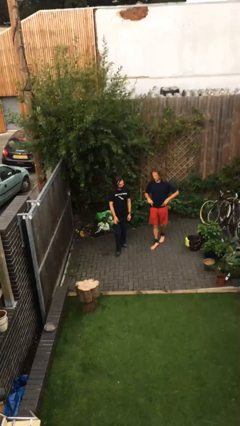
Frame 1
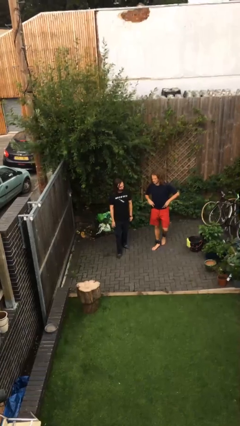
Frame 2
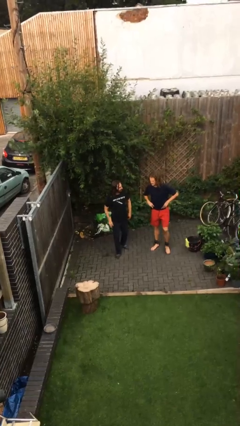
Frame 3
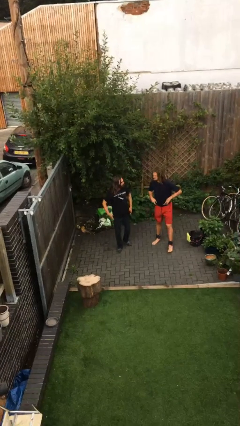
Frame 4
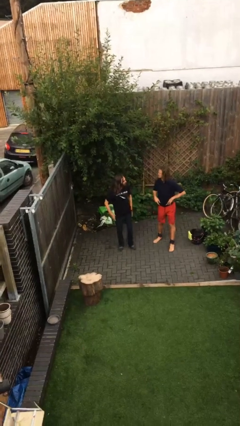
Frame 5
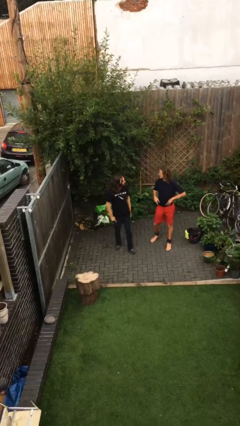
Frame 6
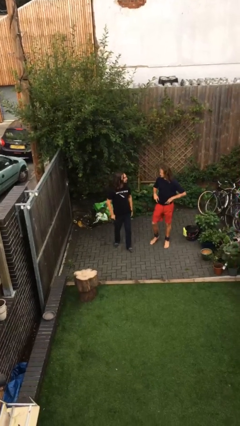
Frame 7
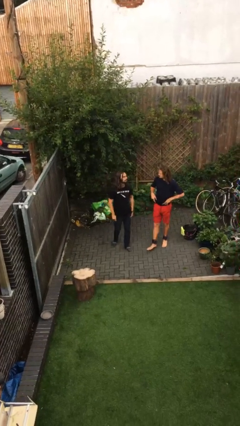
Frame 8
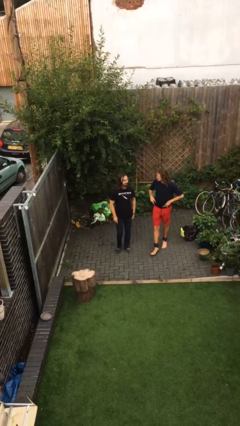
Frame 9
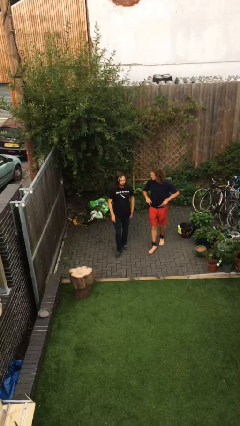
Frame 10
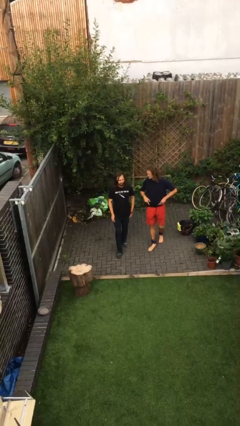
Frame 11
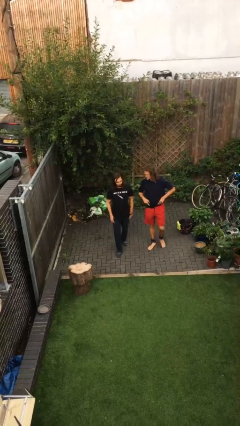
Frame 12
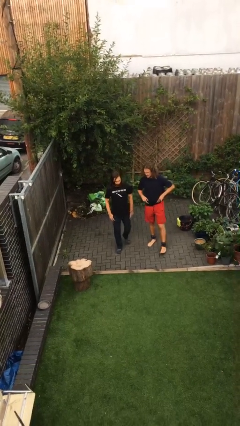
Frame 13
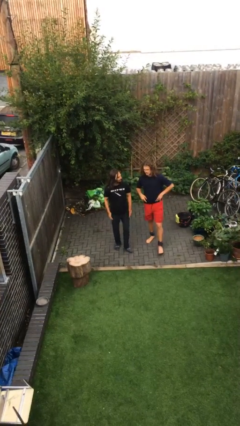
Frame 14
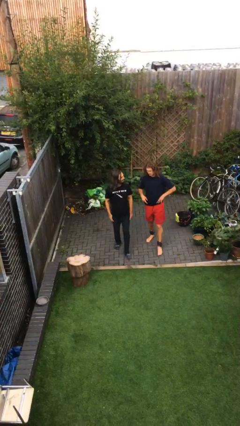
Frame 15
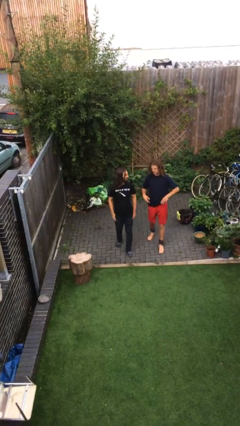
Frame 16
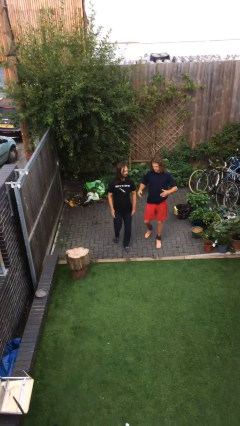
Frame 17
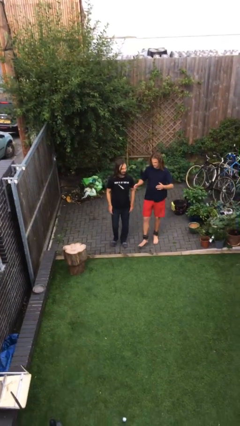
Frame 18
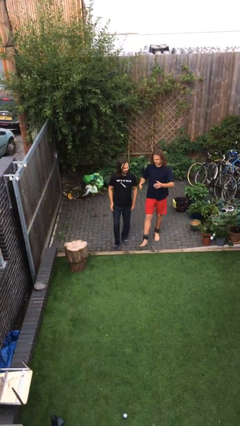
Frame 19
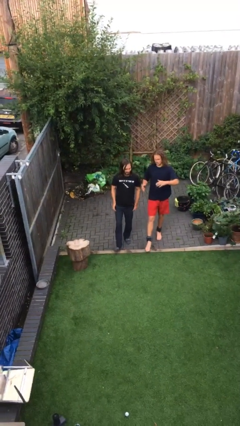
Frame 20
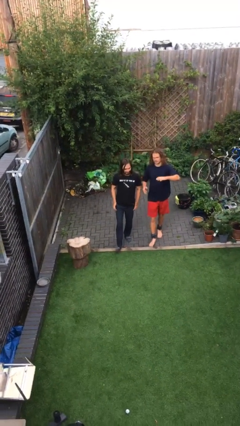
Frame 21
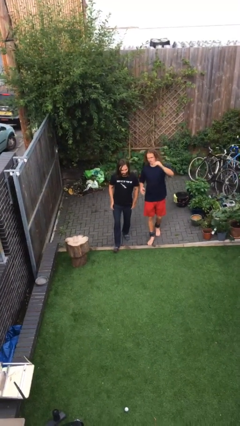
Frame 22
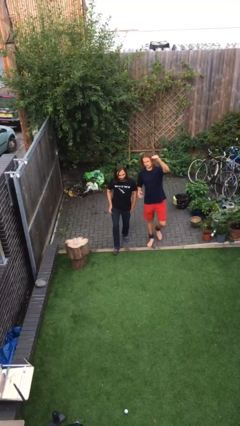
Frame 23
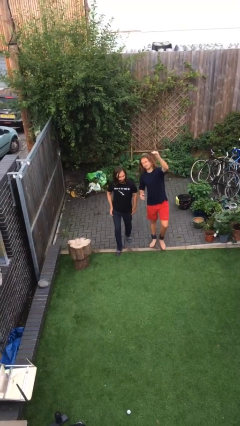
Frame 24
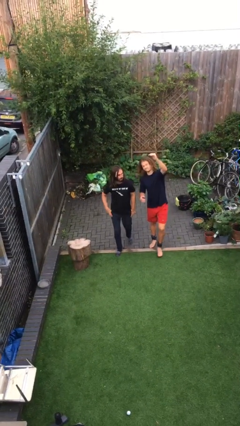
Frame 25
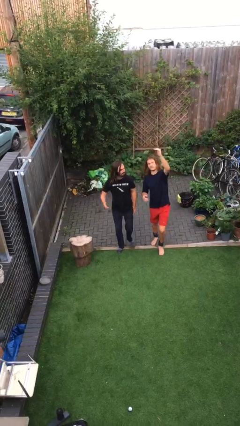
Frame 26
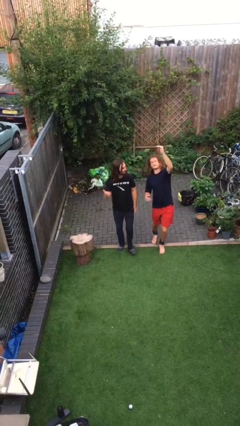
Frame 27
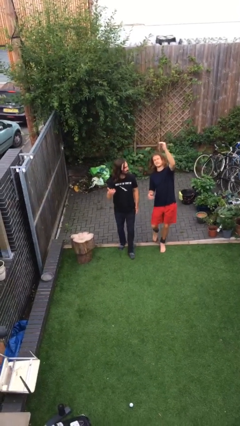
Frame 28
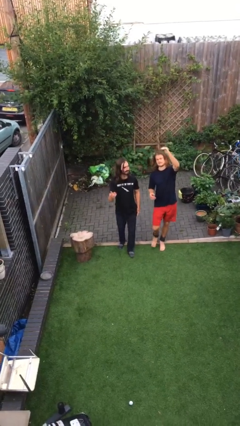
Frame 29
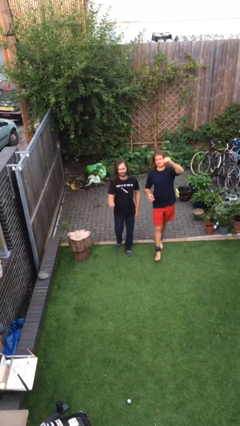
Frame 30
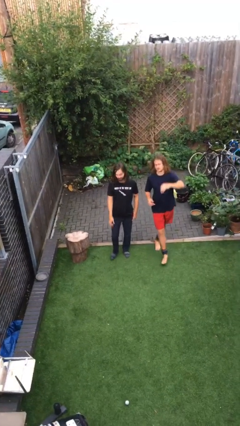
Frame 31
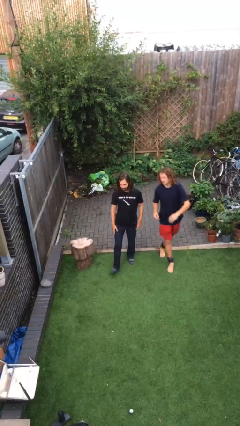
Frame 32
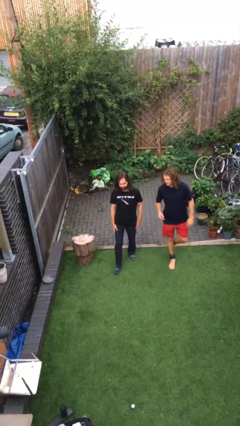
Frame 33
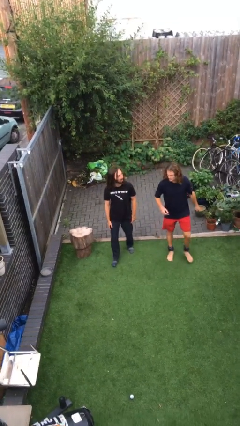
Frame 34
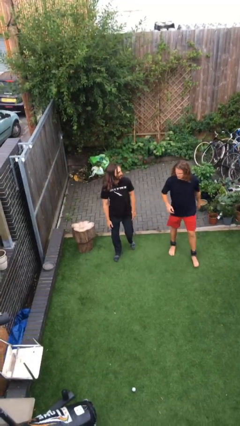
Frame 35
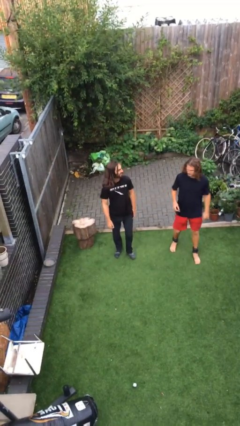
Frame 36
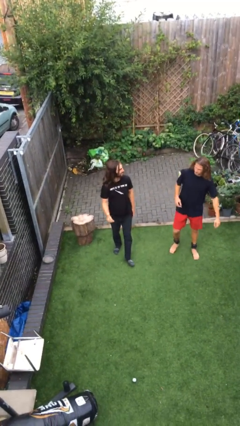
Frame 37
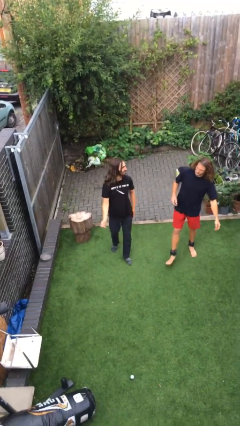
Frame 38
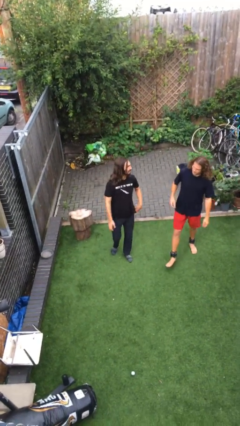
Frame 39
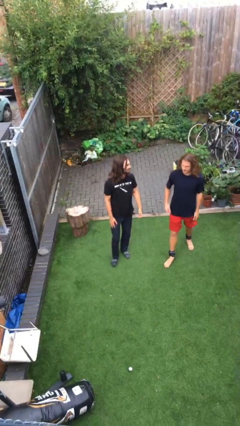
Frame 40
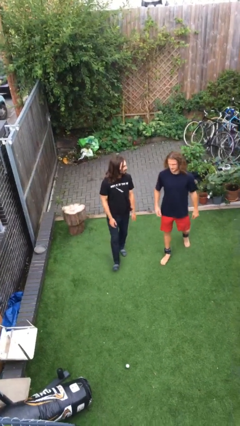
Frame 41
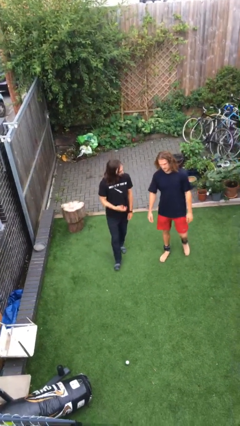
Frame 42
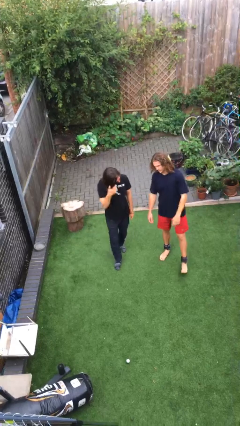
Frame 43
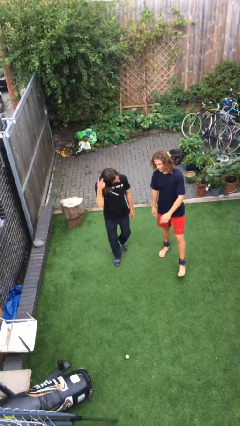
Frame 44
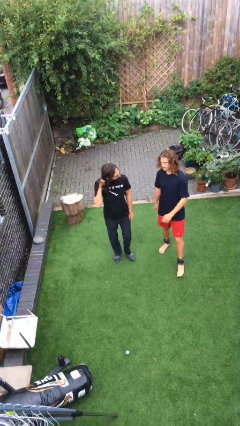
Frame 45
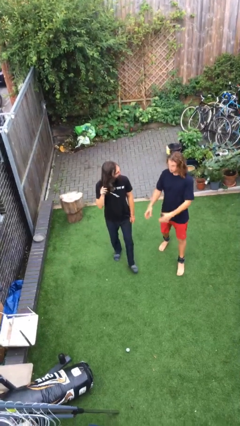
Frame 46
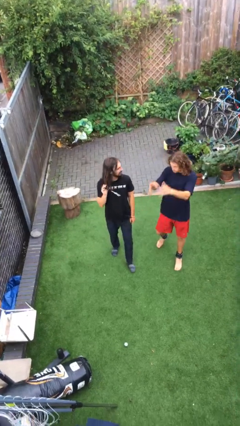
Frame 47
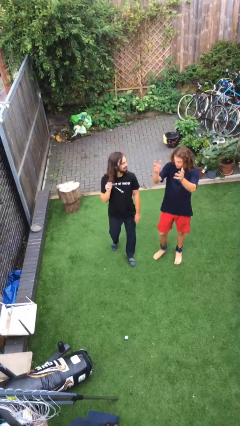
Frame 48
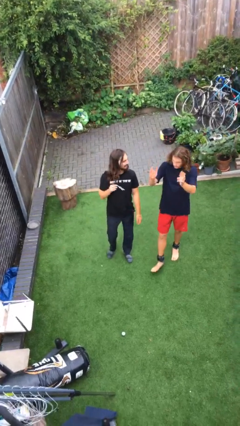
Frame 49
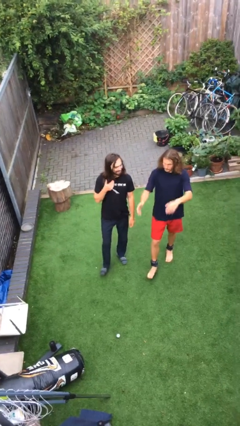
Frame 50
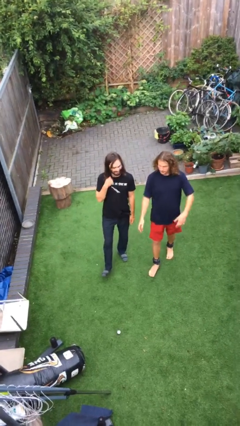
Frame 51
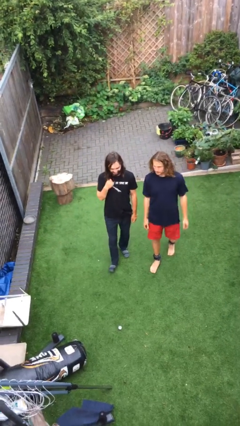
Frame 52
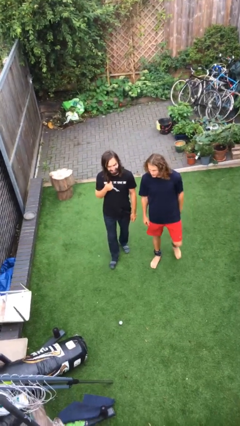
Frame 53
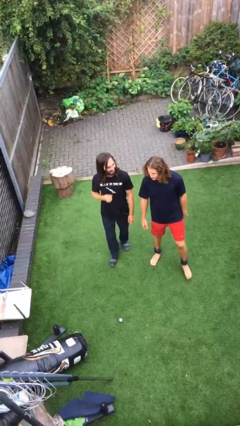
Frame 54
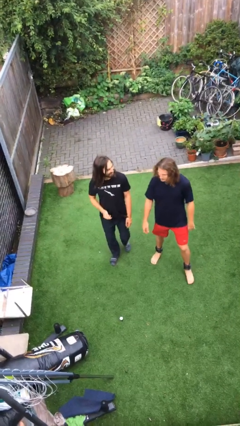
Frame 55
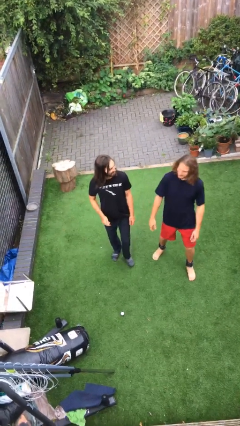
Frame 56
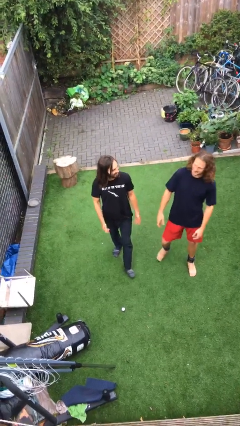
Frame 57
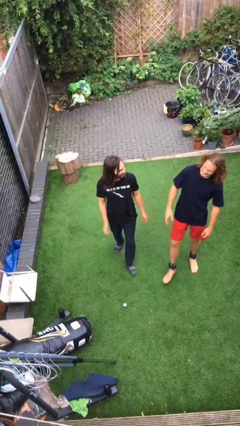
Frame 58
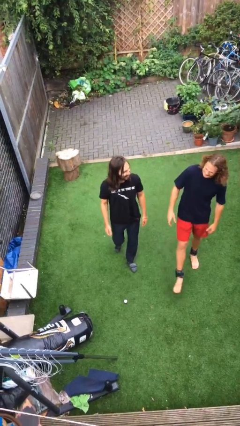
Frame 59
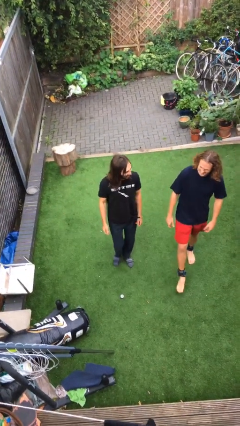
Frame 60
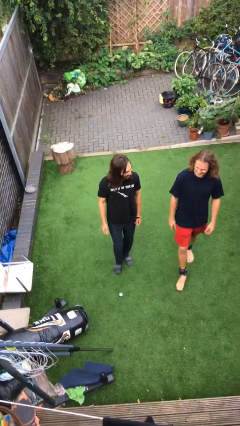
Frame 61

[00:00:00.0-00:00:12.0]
person talks to person

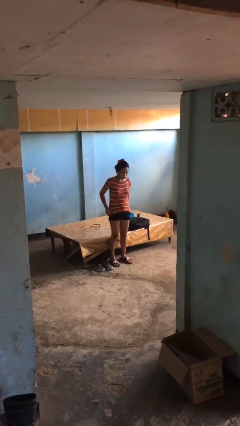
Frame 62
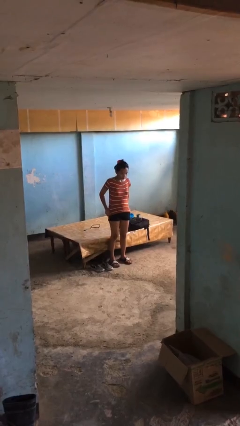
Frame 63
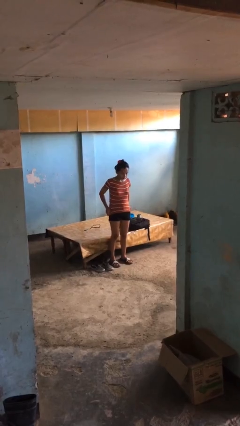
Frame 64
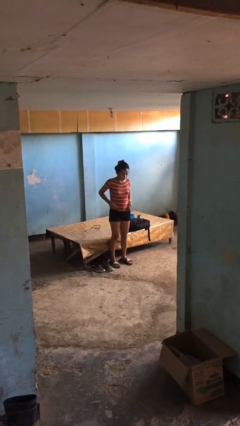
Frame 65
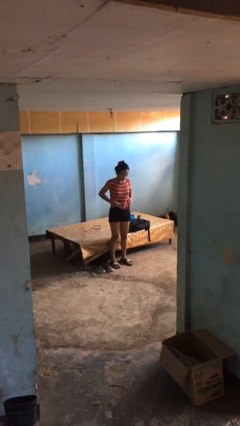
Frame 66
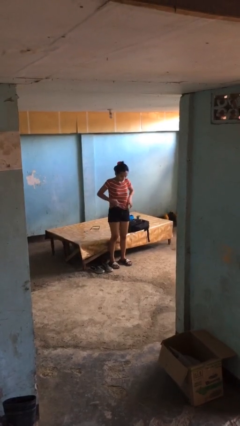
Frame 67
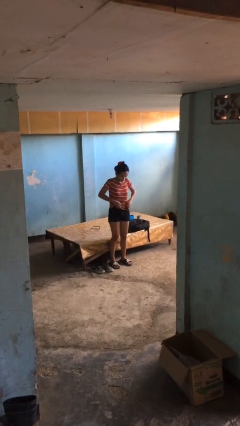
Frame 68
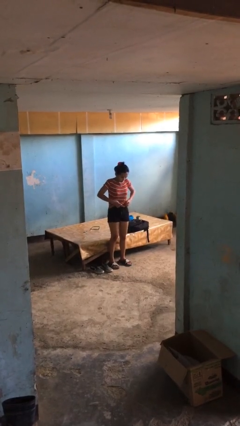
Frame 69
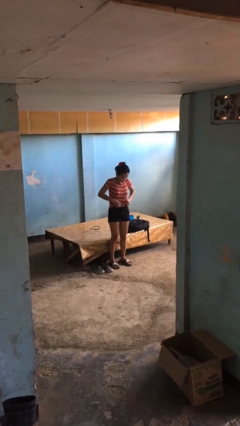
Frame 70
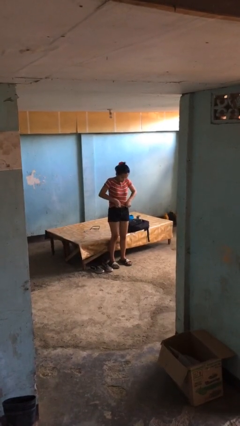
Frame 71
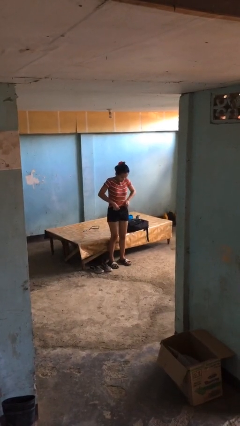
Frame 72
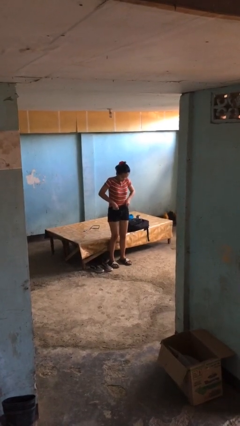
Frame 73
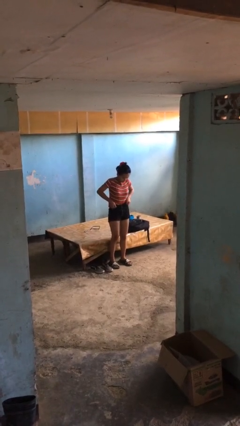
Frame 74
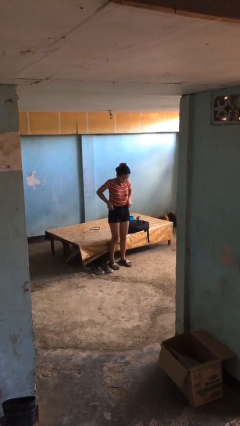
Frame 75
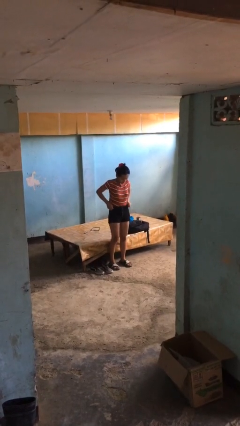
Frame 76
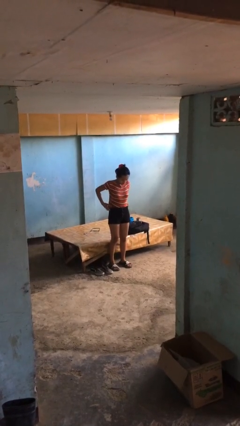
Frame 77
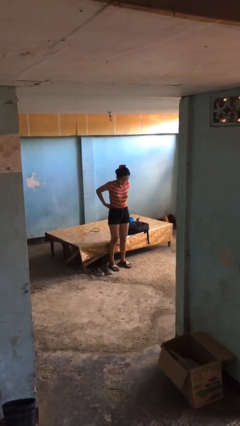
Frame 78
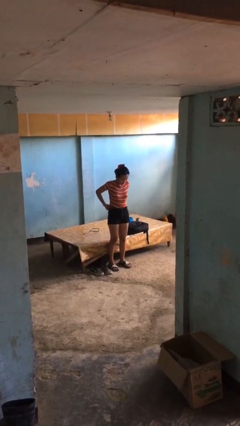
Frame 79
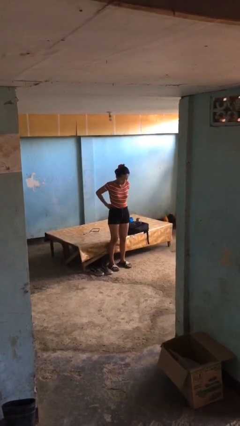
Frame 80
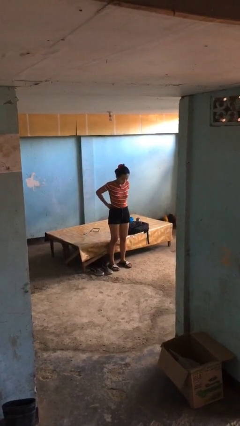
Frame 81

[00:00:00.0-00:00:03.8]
person tucks in shirt

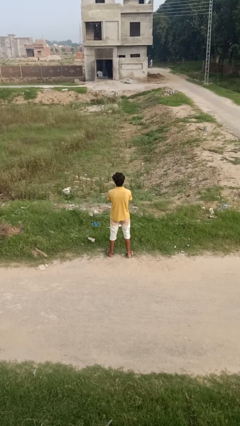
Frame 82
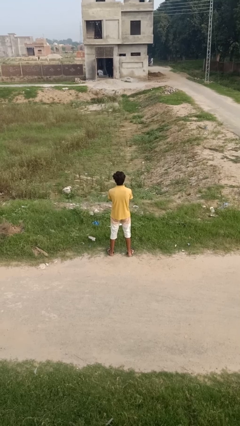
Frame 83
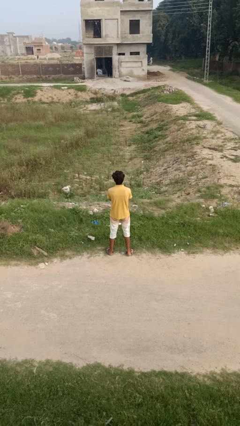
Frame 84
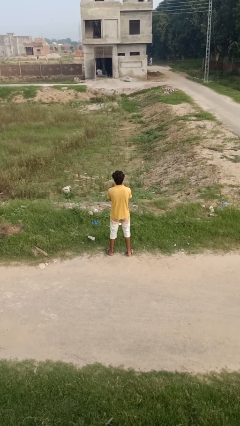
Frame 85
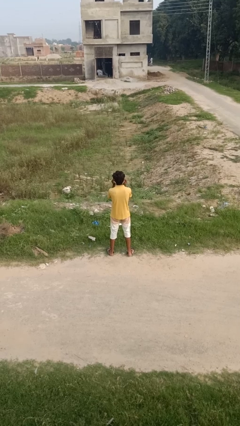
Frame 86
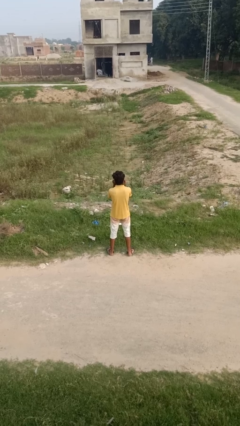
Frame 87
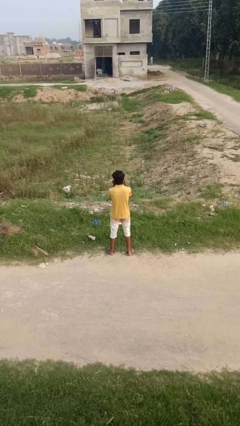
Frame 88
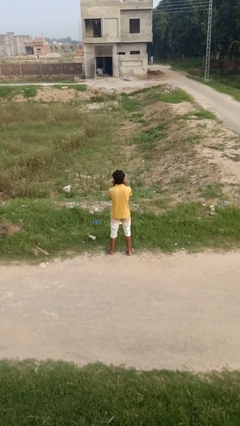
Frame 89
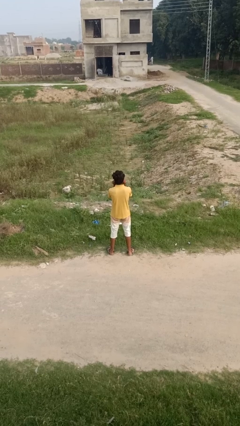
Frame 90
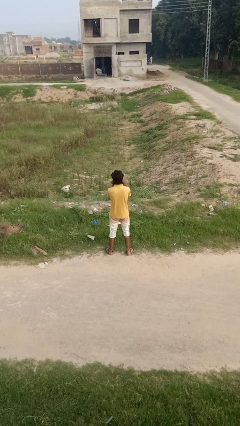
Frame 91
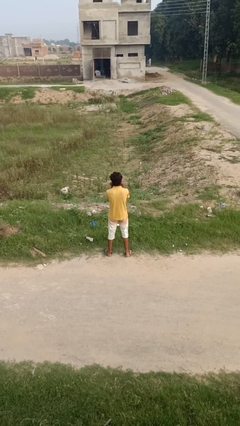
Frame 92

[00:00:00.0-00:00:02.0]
person touches earlobe

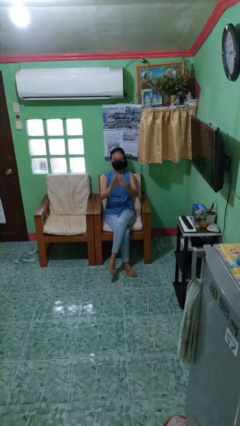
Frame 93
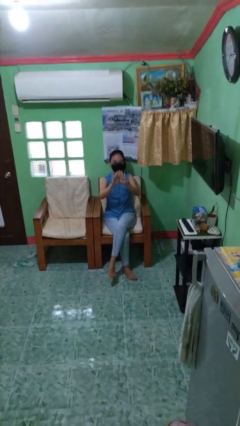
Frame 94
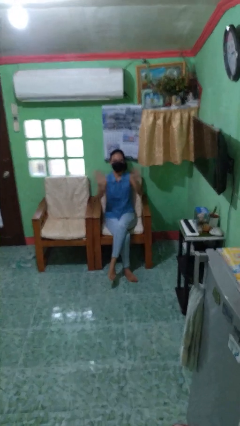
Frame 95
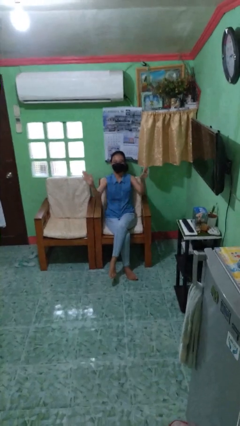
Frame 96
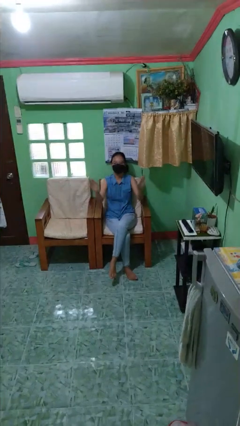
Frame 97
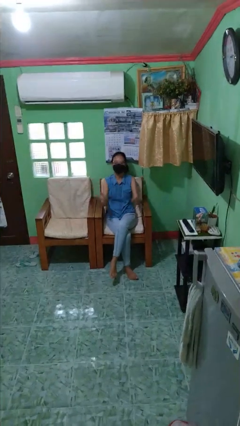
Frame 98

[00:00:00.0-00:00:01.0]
person gestures zoom in
